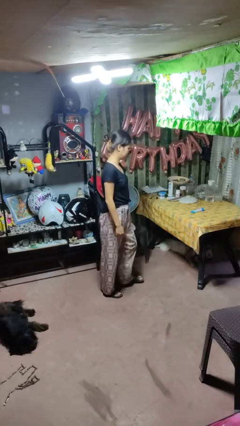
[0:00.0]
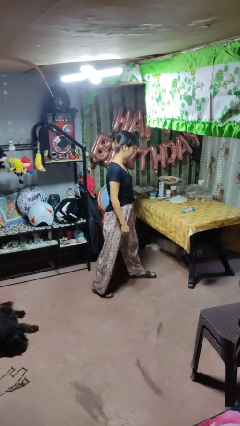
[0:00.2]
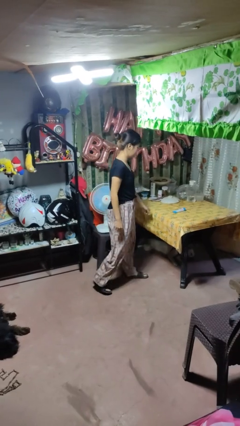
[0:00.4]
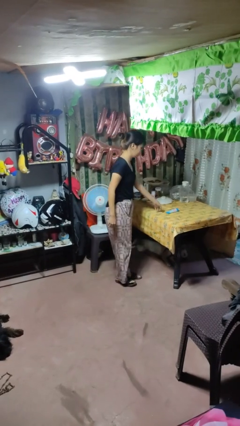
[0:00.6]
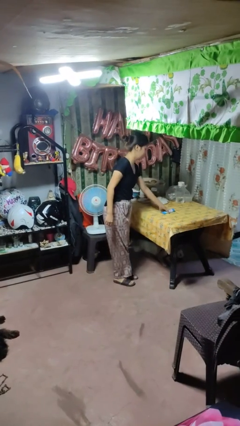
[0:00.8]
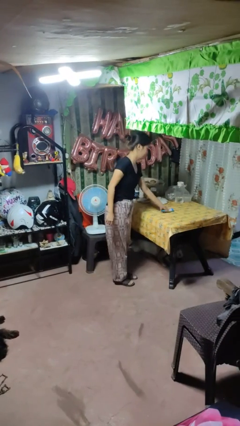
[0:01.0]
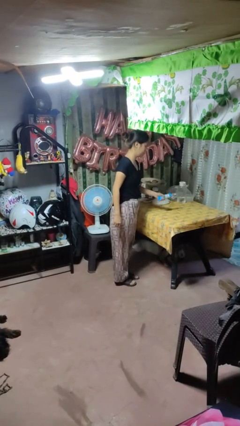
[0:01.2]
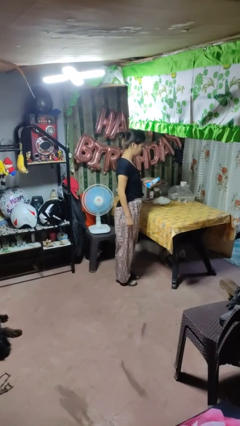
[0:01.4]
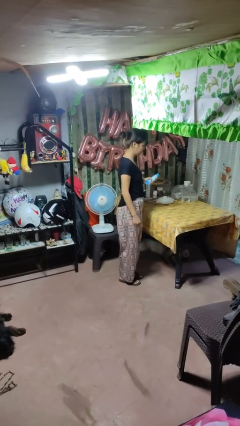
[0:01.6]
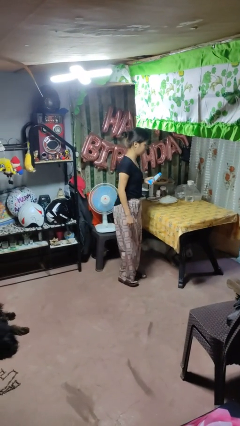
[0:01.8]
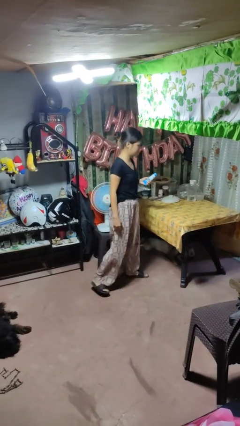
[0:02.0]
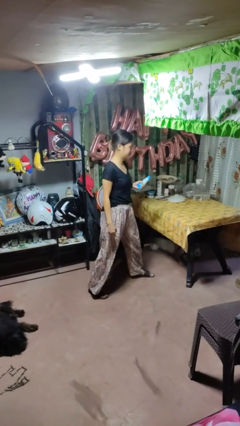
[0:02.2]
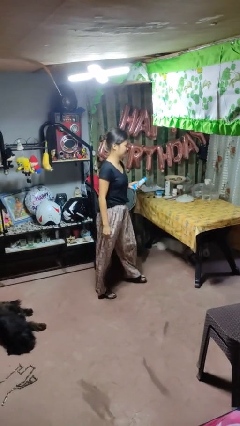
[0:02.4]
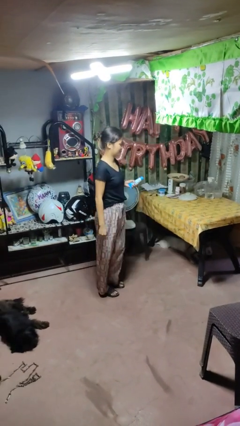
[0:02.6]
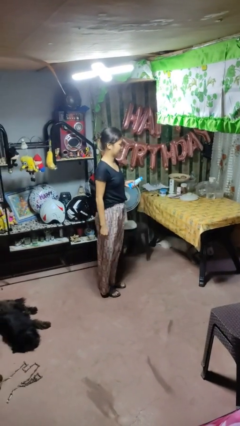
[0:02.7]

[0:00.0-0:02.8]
person picks up object from table

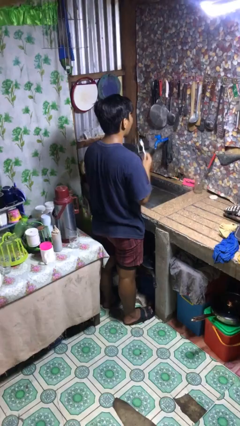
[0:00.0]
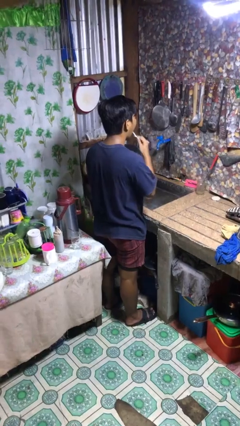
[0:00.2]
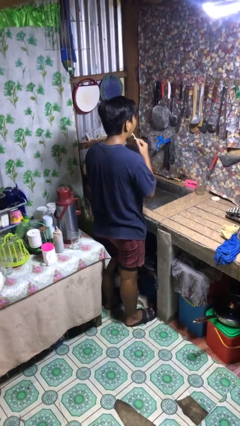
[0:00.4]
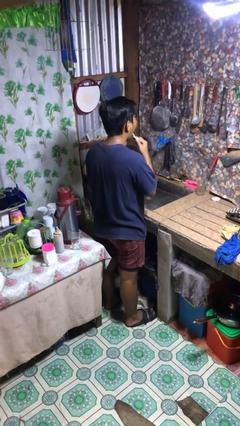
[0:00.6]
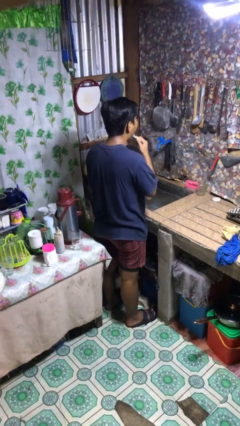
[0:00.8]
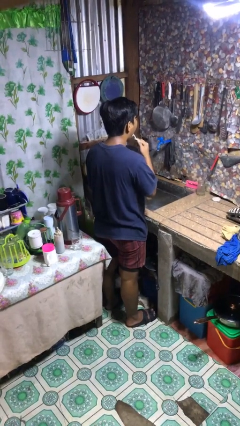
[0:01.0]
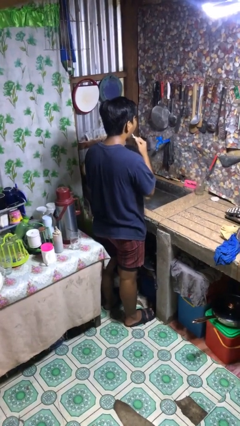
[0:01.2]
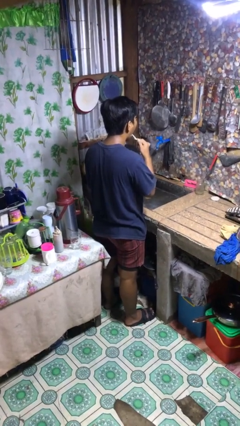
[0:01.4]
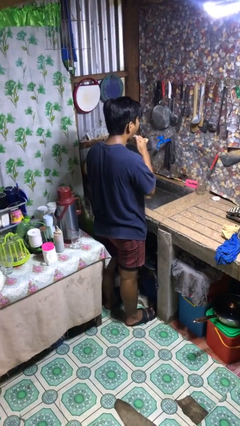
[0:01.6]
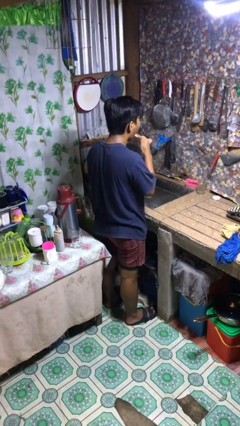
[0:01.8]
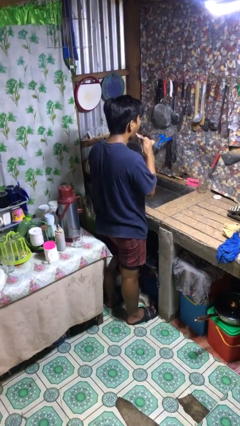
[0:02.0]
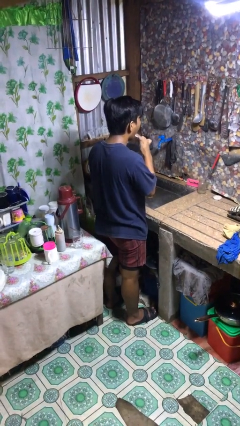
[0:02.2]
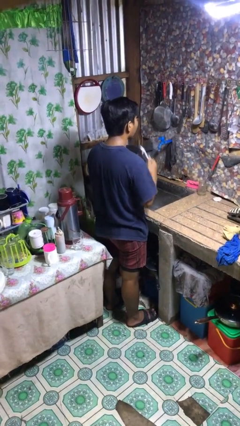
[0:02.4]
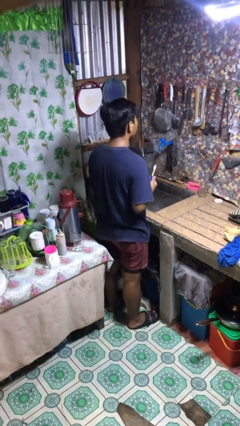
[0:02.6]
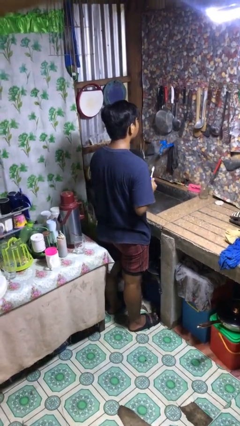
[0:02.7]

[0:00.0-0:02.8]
person brushes teeth

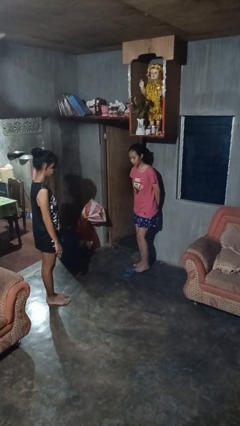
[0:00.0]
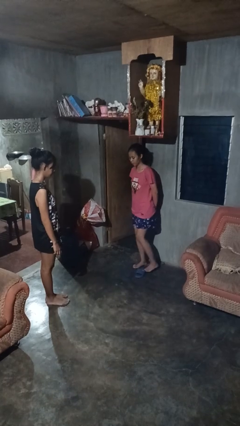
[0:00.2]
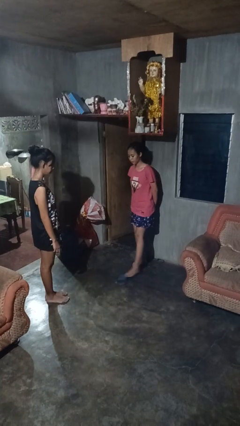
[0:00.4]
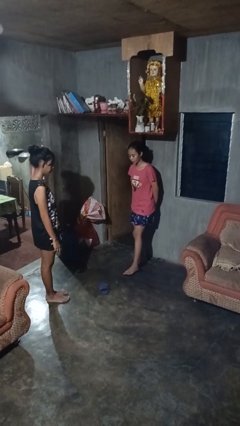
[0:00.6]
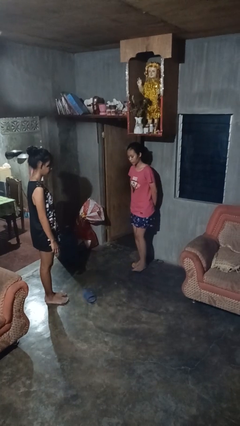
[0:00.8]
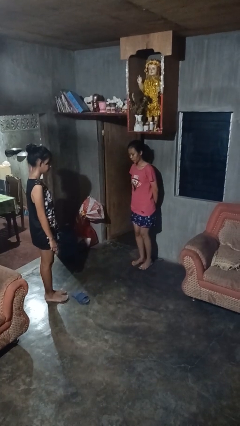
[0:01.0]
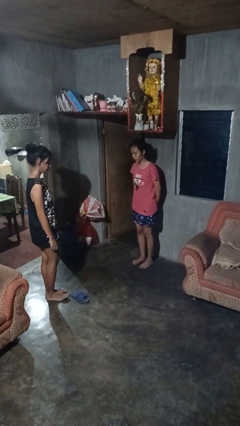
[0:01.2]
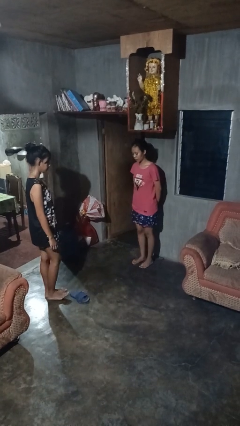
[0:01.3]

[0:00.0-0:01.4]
person kicks object to person

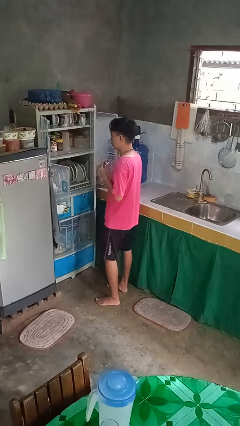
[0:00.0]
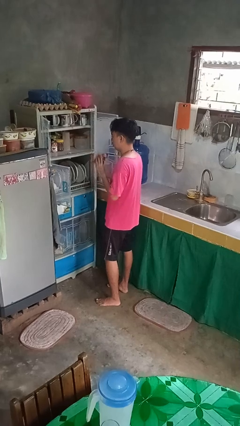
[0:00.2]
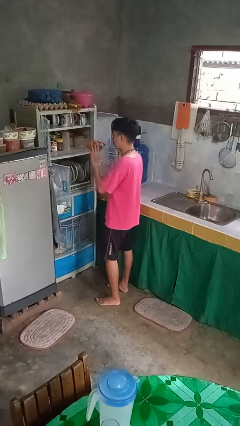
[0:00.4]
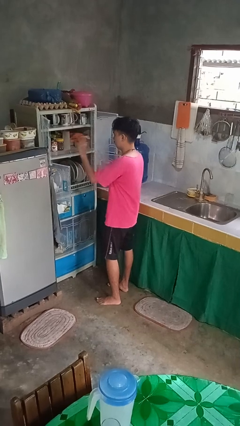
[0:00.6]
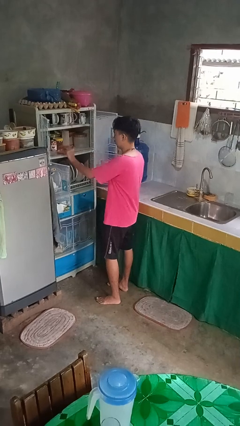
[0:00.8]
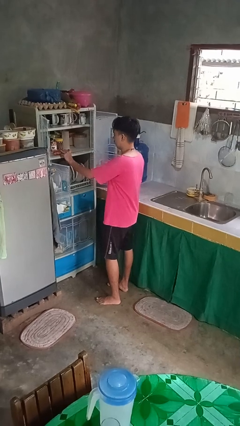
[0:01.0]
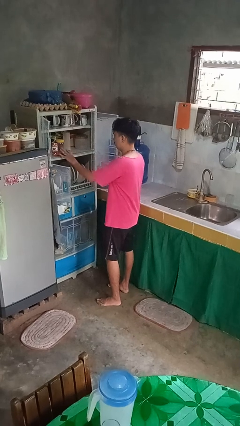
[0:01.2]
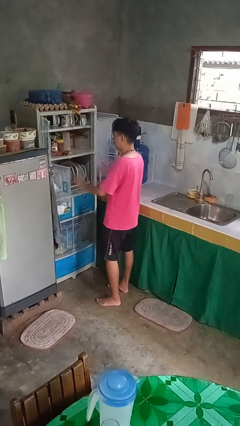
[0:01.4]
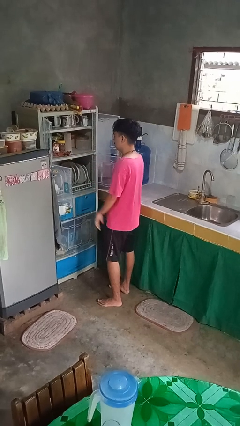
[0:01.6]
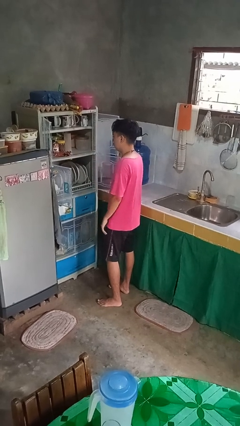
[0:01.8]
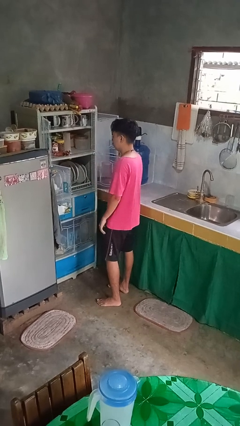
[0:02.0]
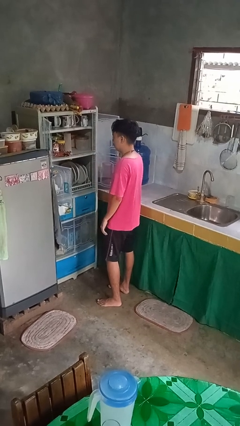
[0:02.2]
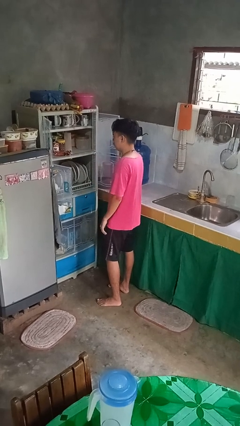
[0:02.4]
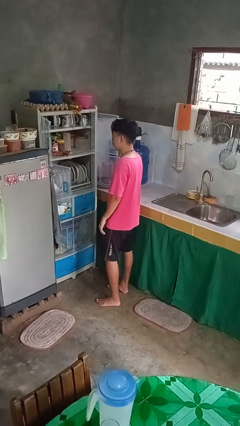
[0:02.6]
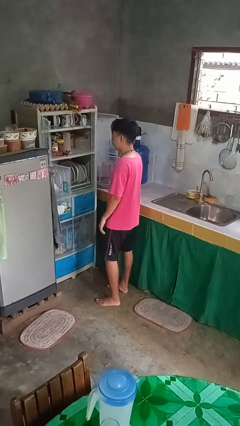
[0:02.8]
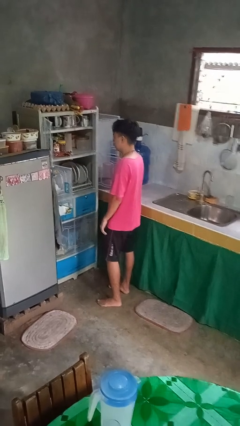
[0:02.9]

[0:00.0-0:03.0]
person puts object in cabinet

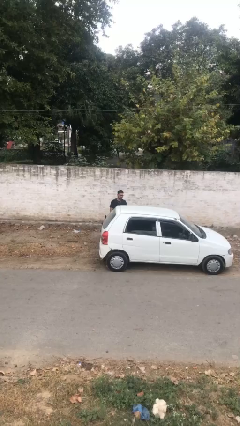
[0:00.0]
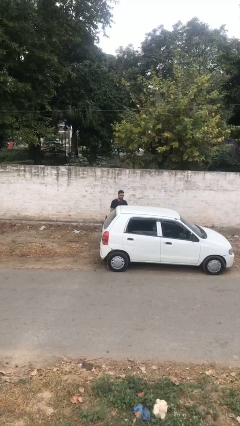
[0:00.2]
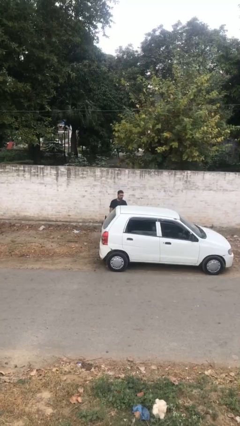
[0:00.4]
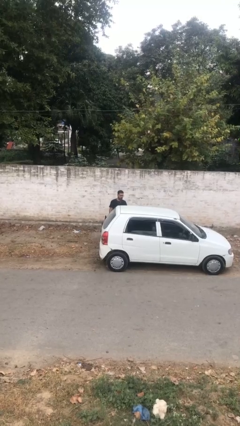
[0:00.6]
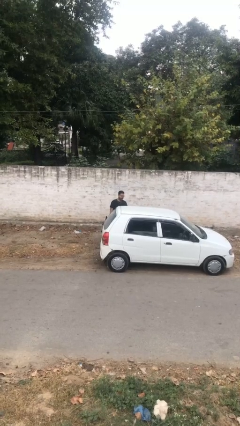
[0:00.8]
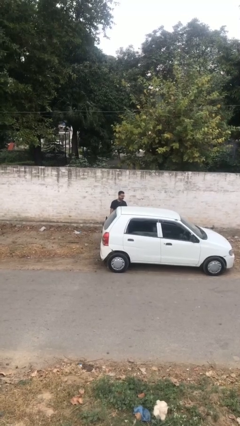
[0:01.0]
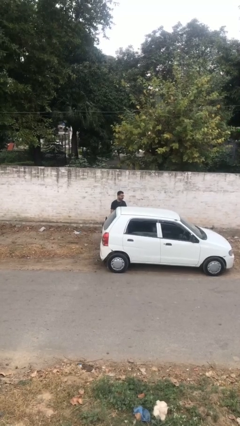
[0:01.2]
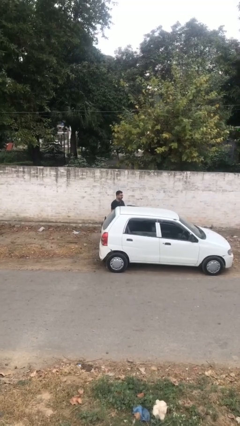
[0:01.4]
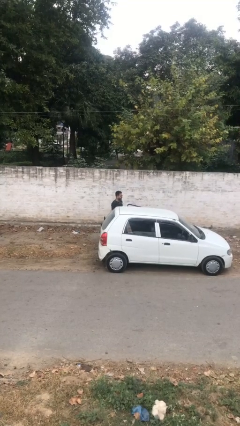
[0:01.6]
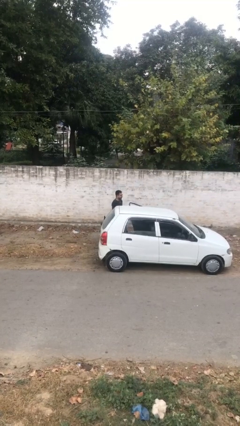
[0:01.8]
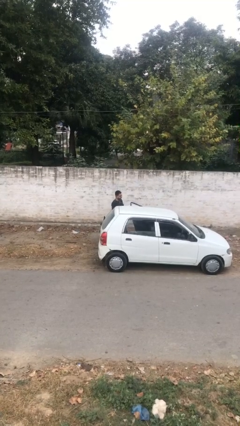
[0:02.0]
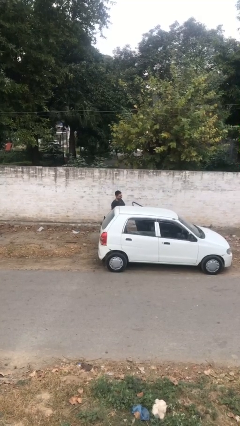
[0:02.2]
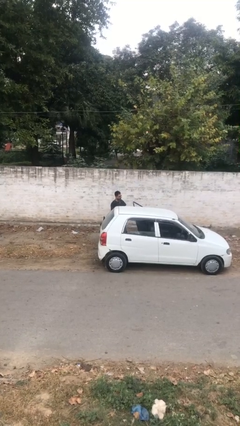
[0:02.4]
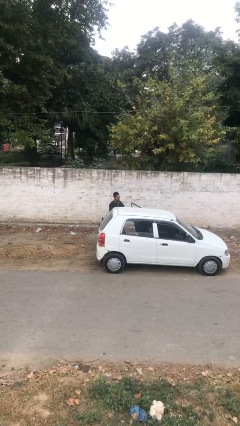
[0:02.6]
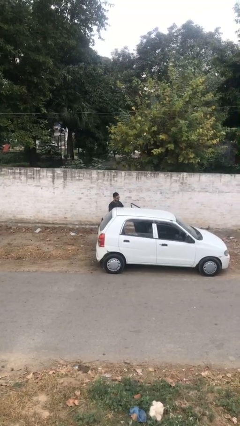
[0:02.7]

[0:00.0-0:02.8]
person opens car door

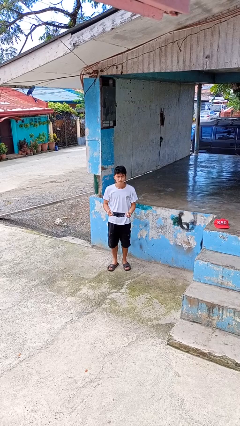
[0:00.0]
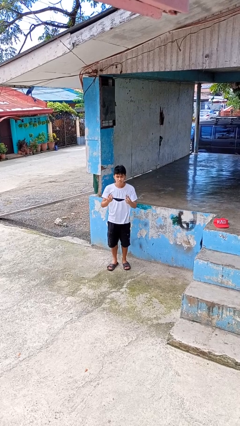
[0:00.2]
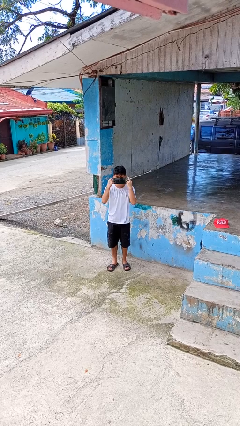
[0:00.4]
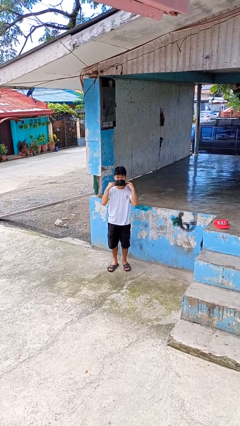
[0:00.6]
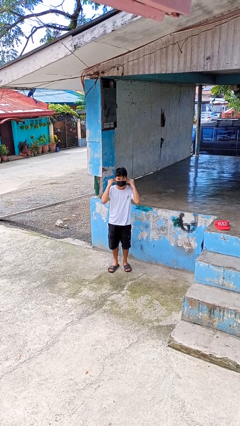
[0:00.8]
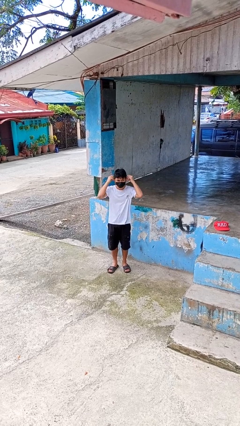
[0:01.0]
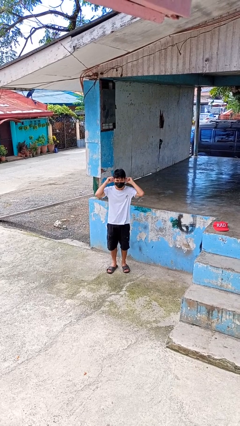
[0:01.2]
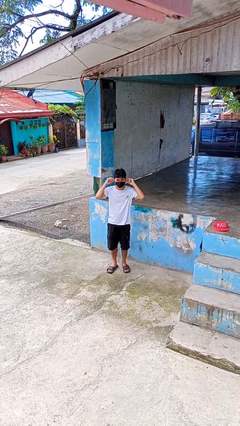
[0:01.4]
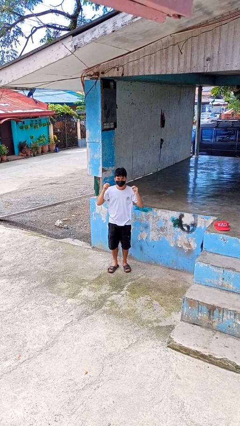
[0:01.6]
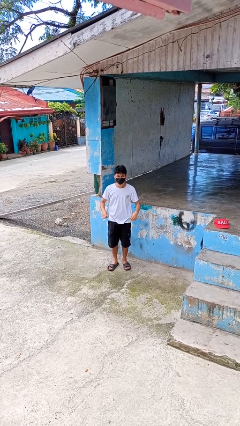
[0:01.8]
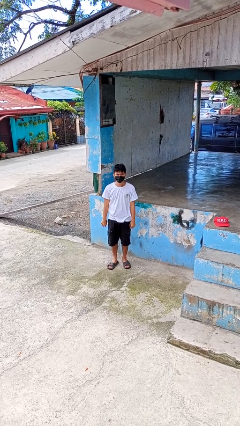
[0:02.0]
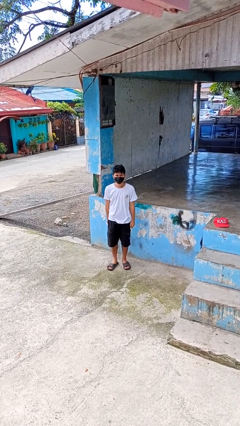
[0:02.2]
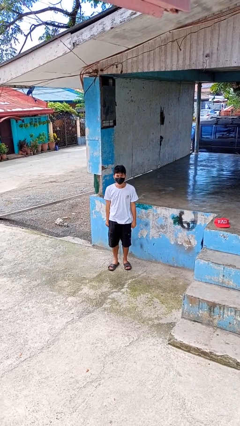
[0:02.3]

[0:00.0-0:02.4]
person puts on facemask

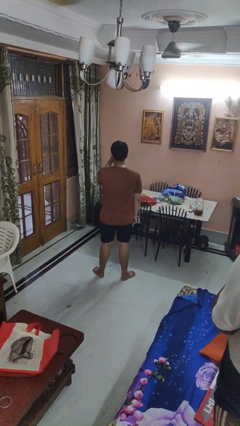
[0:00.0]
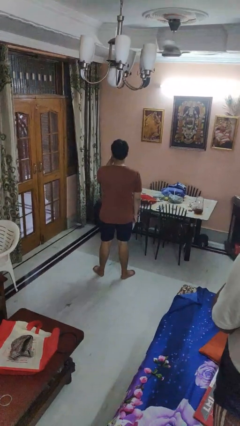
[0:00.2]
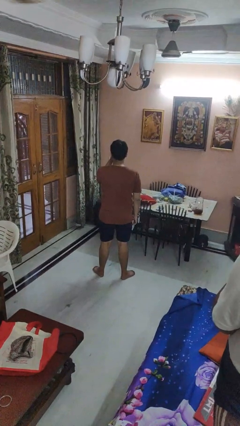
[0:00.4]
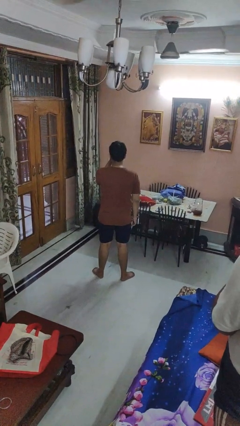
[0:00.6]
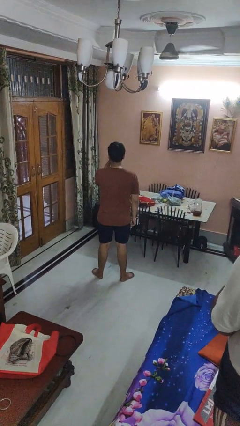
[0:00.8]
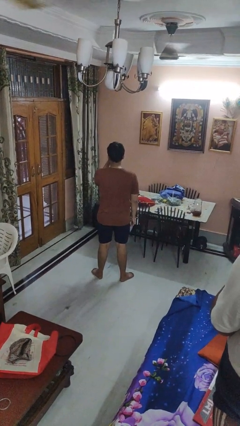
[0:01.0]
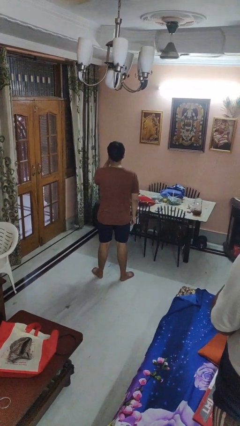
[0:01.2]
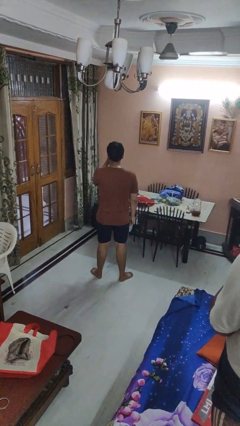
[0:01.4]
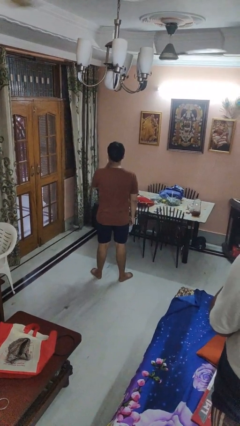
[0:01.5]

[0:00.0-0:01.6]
person gestures watch closely

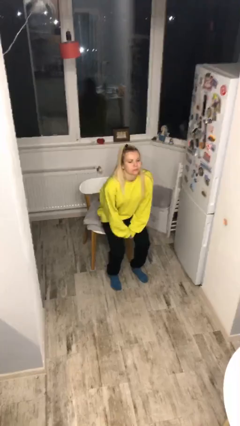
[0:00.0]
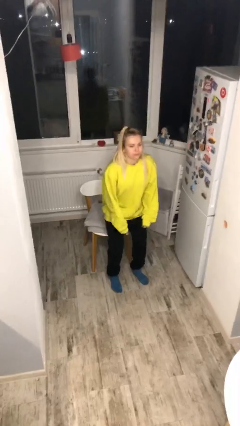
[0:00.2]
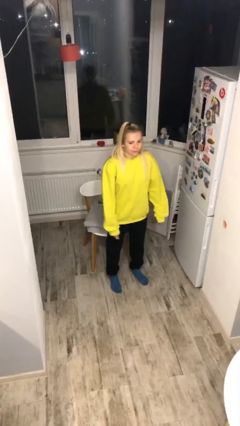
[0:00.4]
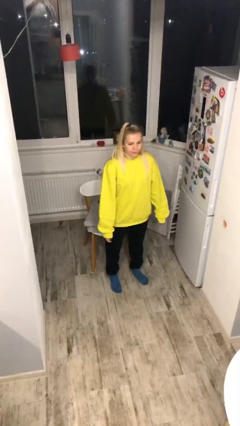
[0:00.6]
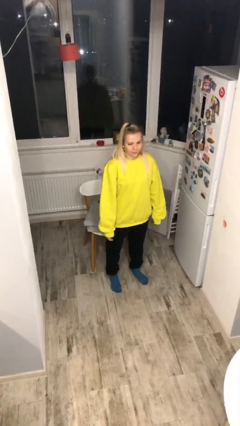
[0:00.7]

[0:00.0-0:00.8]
person stands up
